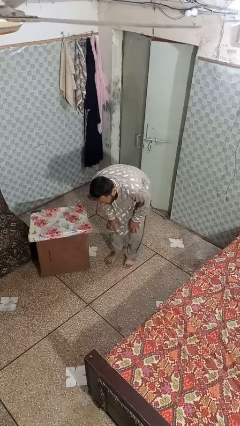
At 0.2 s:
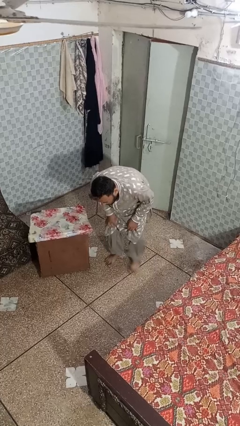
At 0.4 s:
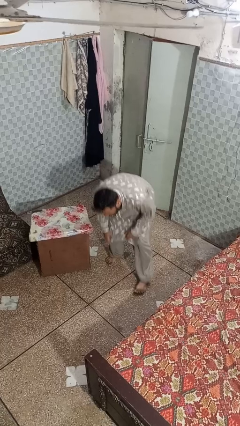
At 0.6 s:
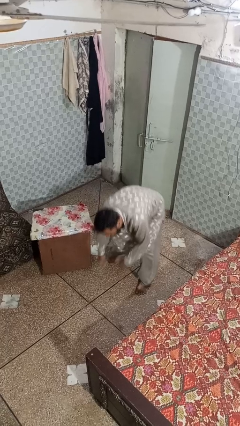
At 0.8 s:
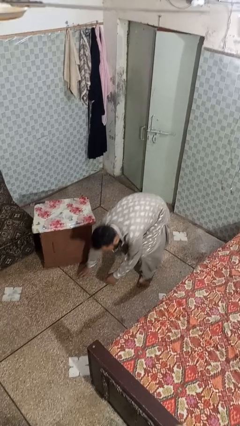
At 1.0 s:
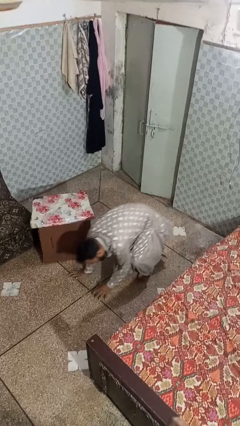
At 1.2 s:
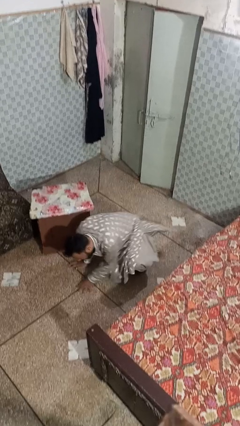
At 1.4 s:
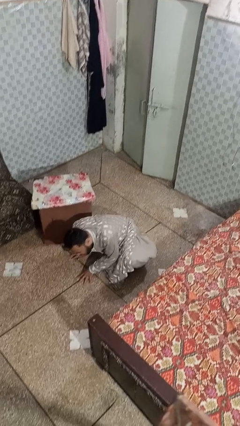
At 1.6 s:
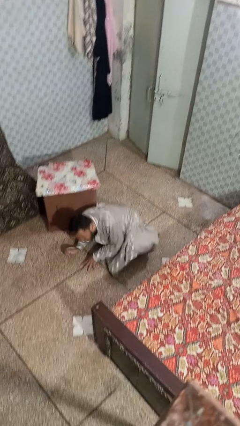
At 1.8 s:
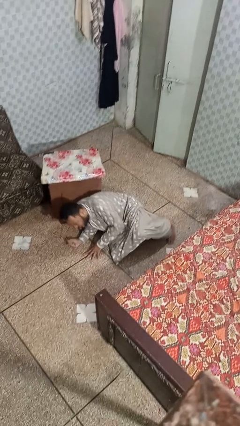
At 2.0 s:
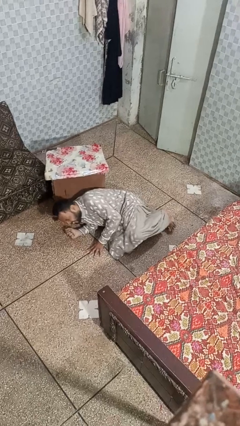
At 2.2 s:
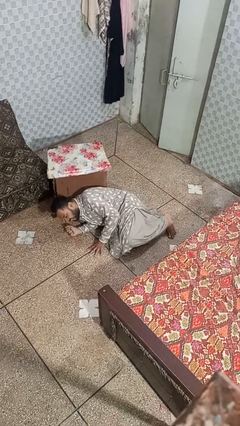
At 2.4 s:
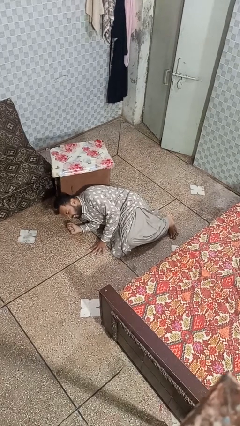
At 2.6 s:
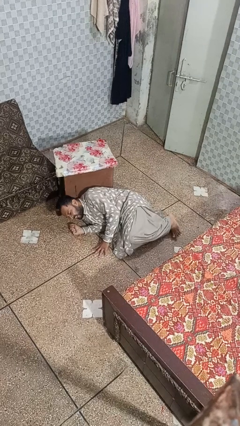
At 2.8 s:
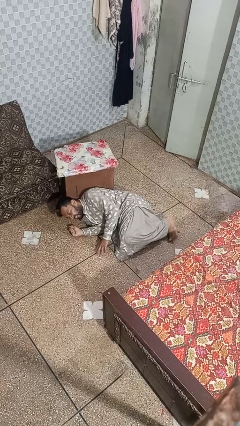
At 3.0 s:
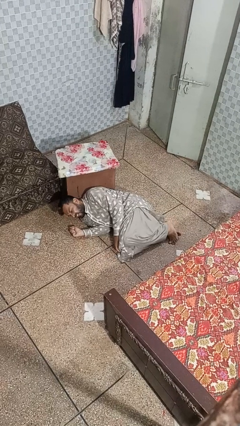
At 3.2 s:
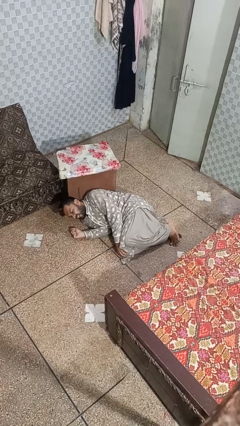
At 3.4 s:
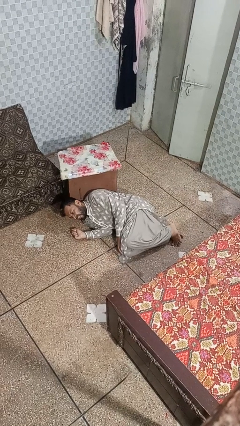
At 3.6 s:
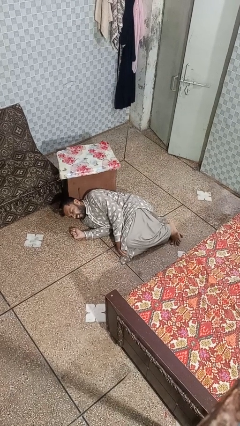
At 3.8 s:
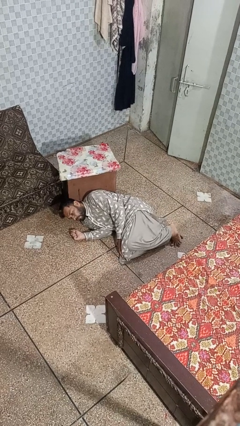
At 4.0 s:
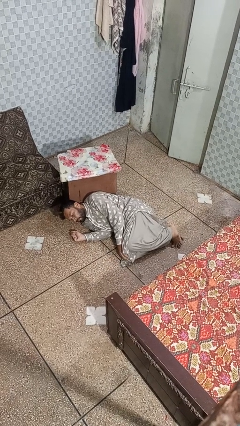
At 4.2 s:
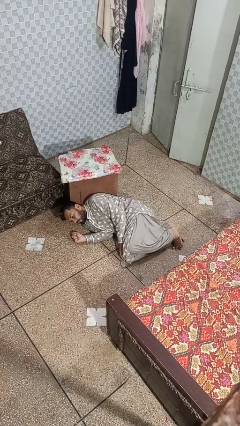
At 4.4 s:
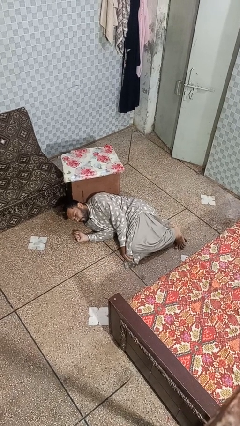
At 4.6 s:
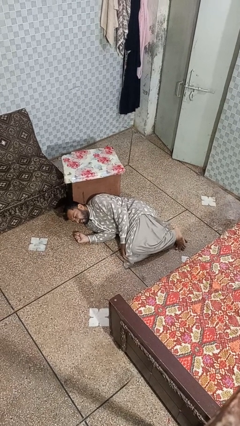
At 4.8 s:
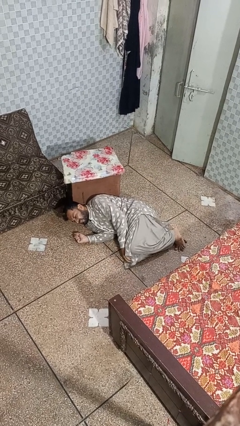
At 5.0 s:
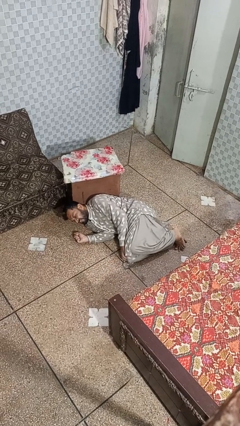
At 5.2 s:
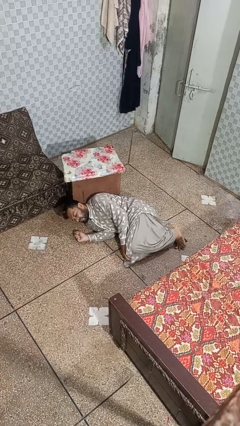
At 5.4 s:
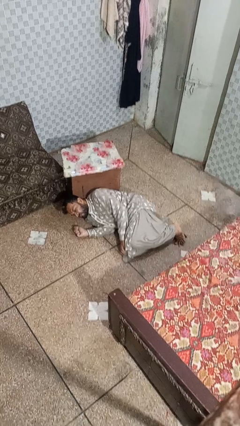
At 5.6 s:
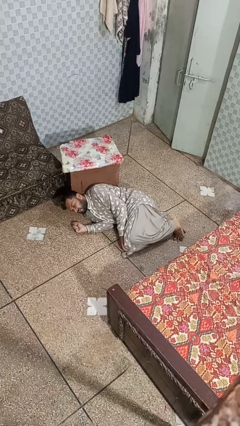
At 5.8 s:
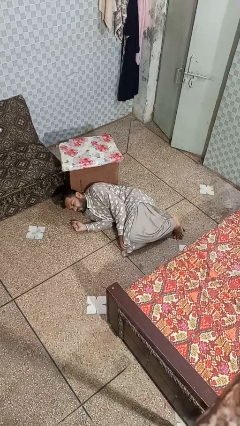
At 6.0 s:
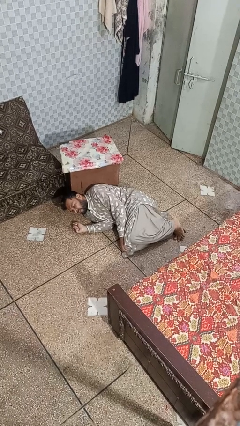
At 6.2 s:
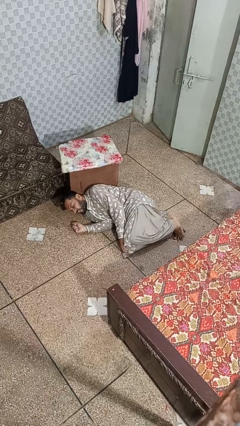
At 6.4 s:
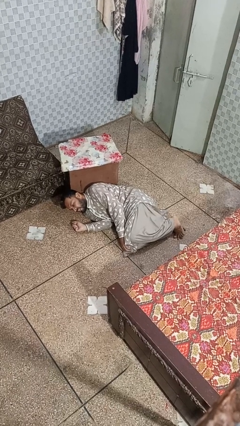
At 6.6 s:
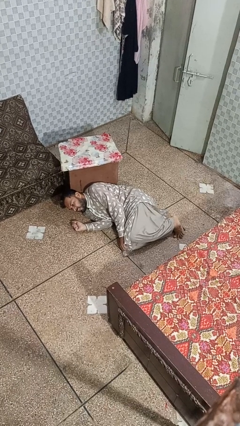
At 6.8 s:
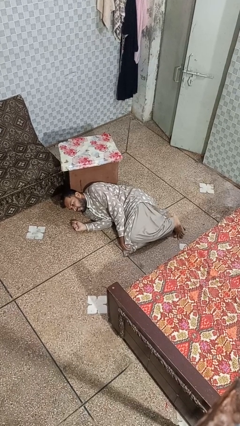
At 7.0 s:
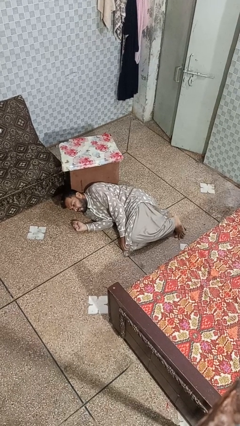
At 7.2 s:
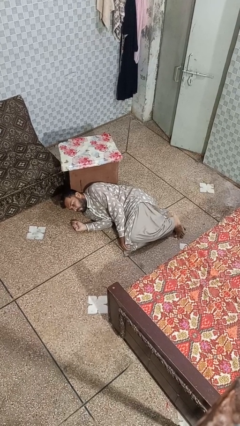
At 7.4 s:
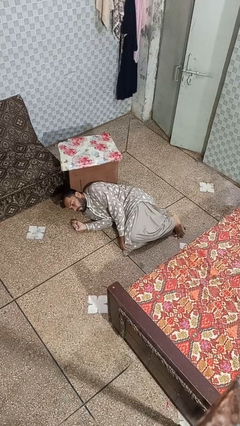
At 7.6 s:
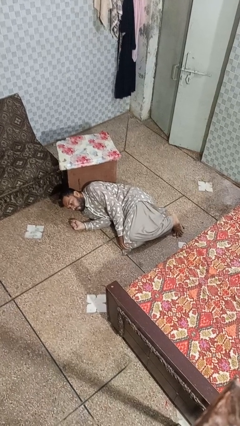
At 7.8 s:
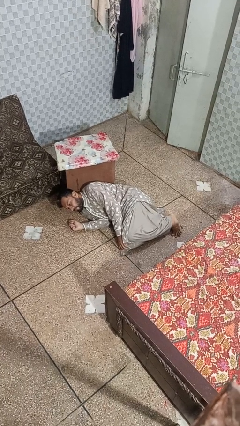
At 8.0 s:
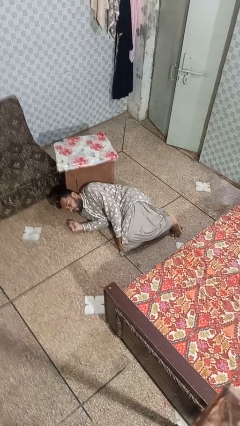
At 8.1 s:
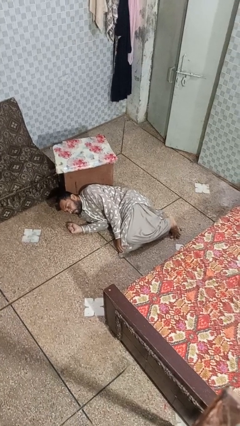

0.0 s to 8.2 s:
person lies down on floor

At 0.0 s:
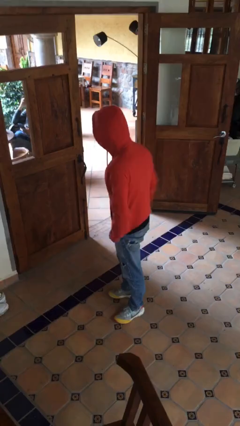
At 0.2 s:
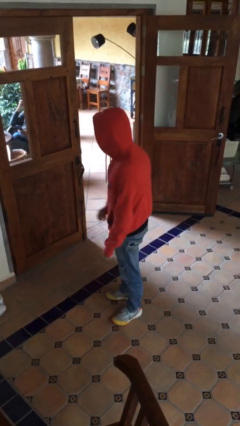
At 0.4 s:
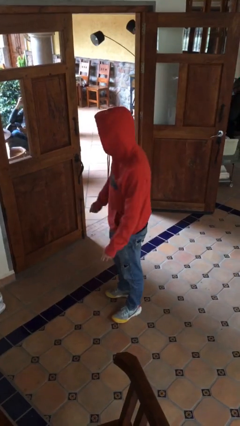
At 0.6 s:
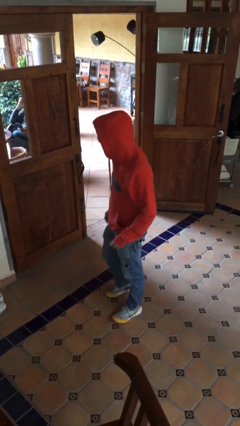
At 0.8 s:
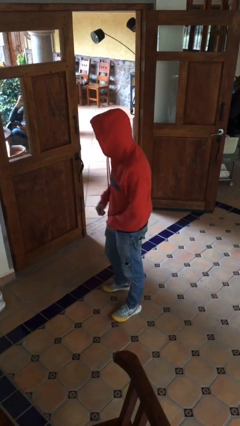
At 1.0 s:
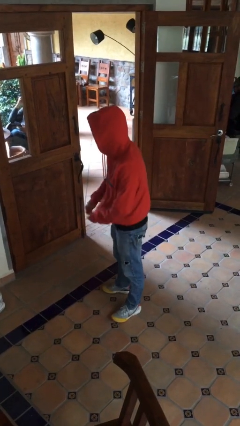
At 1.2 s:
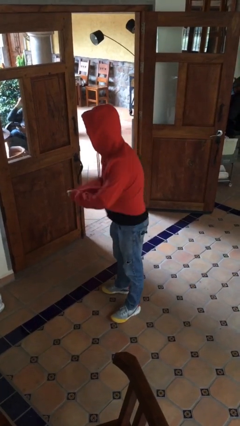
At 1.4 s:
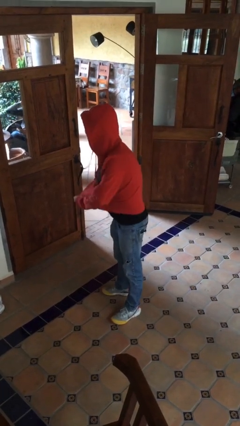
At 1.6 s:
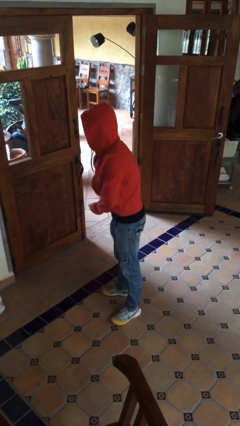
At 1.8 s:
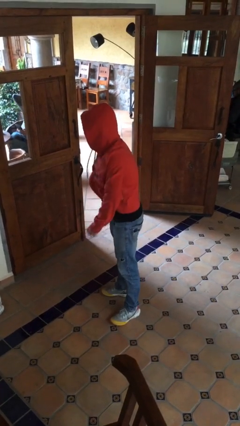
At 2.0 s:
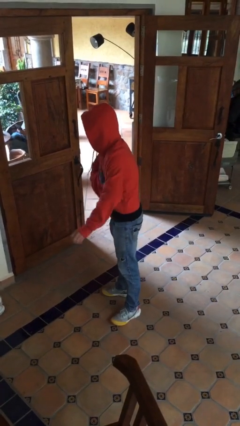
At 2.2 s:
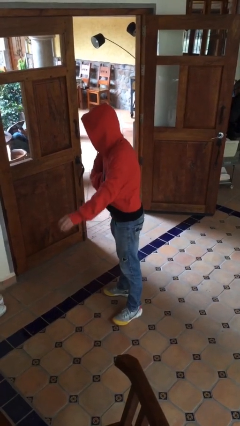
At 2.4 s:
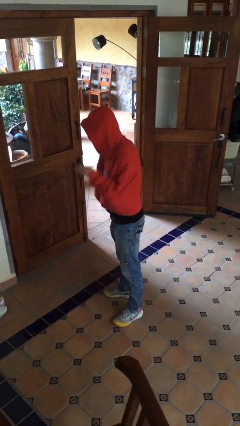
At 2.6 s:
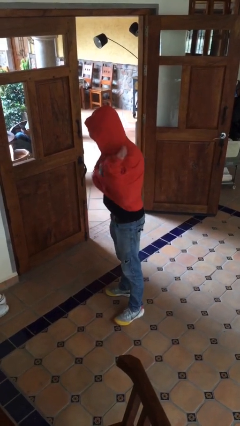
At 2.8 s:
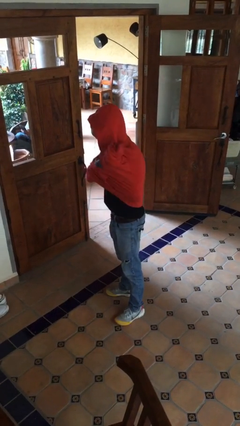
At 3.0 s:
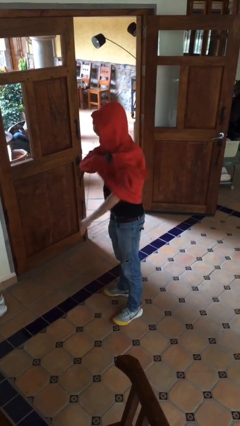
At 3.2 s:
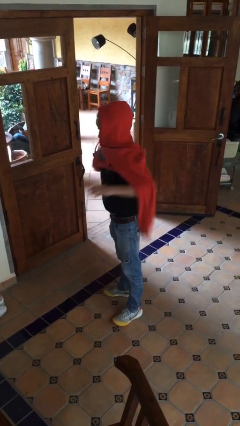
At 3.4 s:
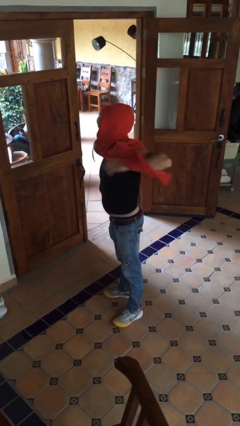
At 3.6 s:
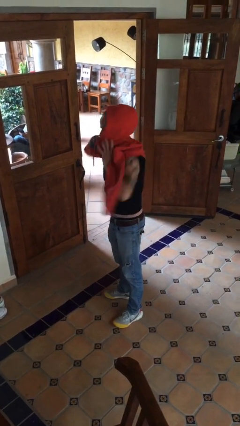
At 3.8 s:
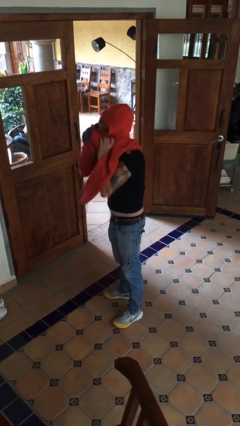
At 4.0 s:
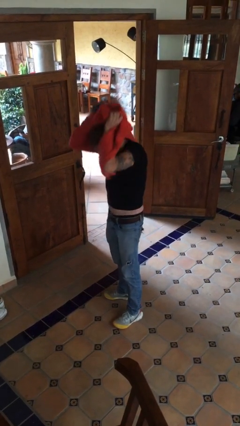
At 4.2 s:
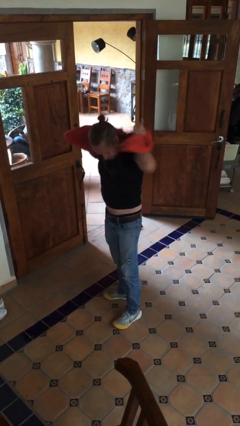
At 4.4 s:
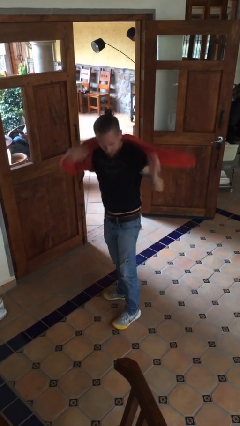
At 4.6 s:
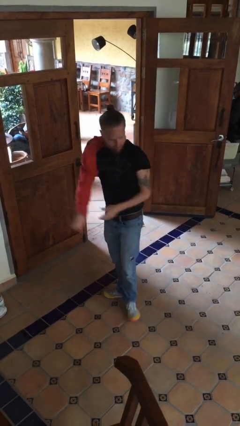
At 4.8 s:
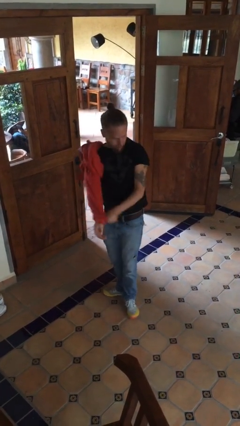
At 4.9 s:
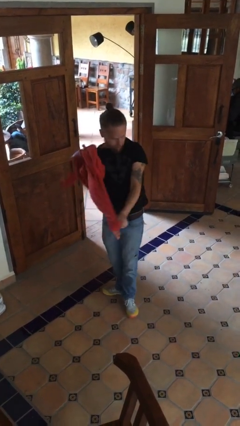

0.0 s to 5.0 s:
person takes off hoodie

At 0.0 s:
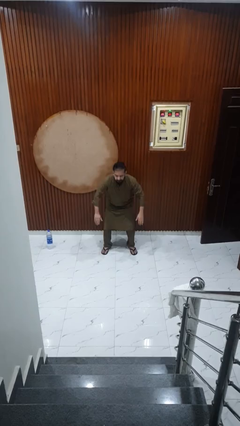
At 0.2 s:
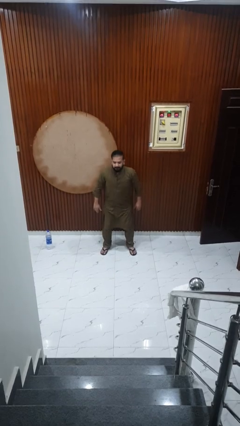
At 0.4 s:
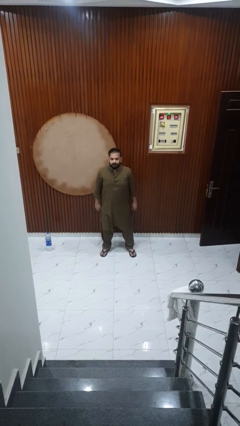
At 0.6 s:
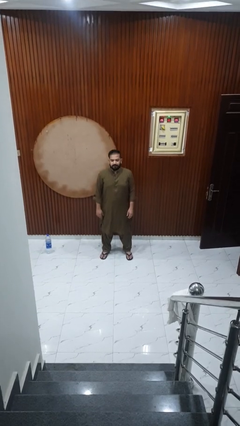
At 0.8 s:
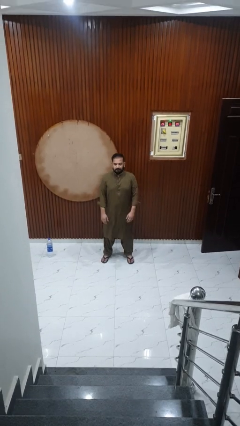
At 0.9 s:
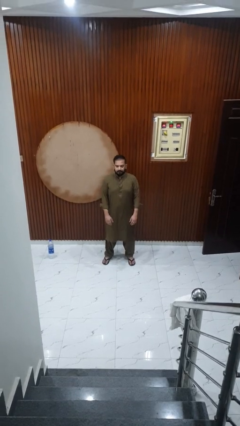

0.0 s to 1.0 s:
person stands up

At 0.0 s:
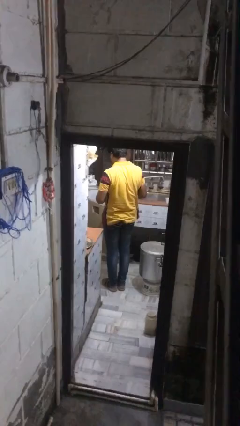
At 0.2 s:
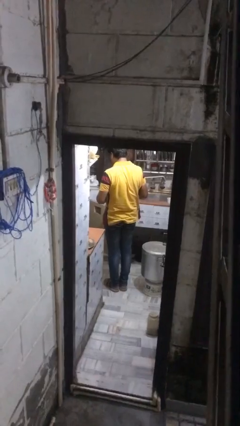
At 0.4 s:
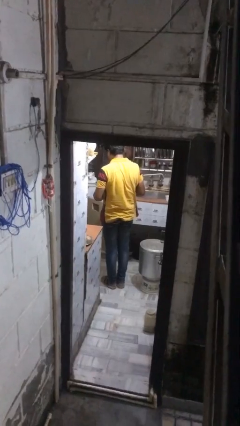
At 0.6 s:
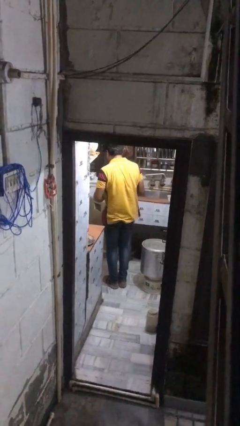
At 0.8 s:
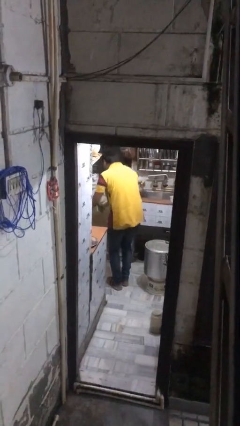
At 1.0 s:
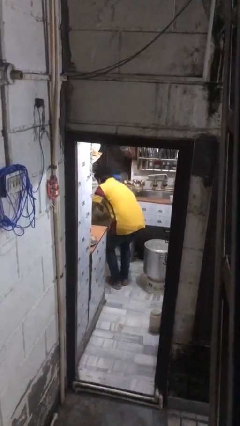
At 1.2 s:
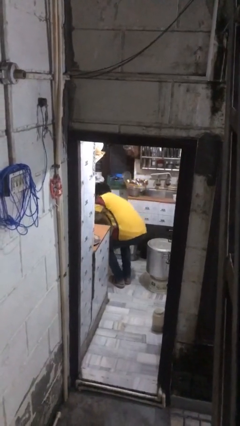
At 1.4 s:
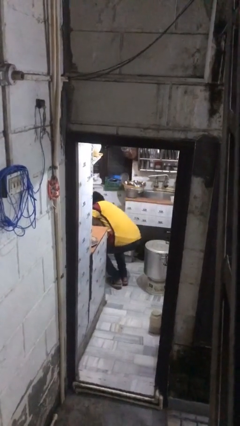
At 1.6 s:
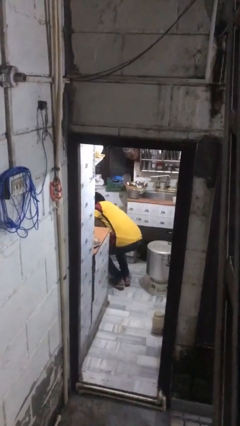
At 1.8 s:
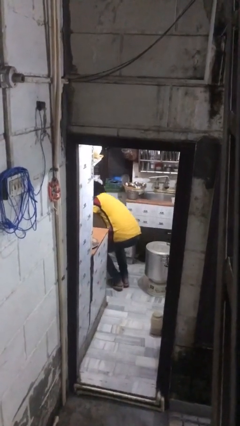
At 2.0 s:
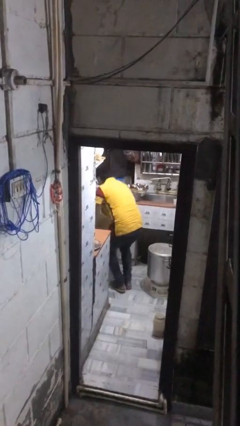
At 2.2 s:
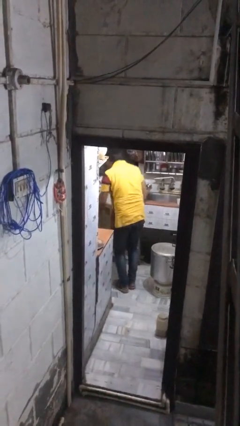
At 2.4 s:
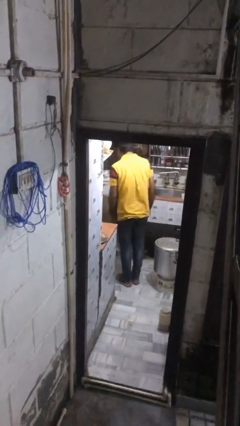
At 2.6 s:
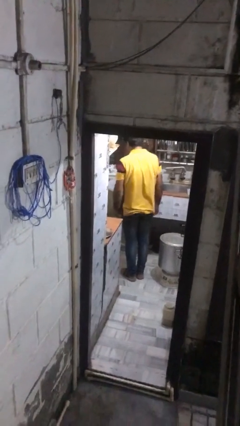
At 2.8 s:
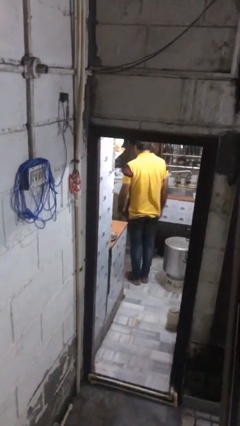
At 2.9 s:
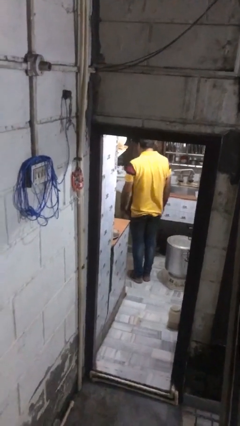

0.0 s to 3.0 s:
person puts object into kitchen drawer

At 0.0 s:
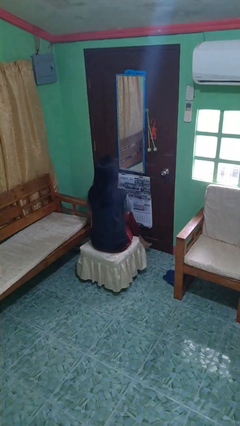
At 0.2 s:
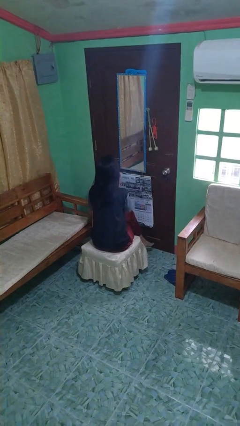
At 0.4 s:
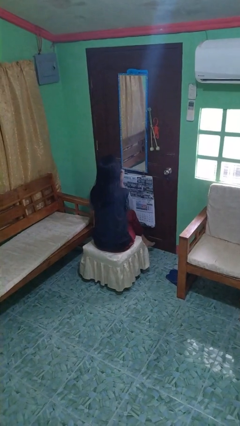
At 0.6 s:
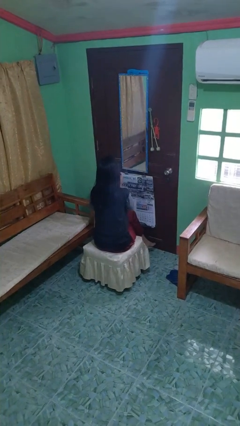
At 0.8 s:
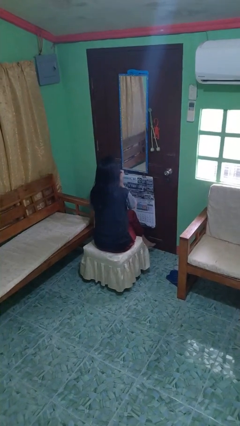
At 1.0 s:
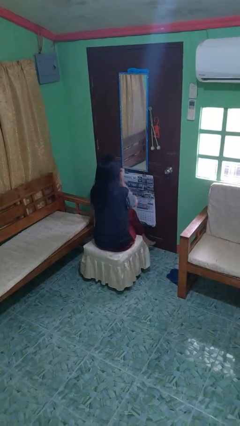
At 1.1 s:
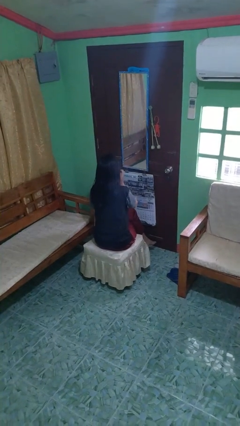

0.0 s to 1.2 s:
person scratches face
